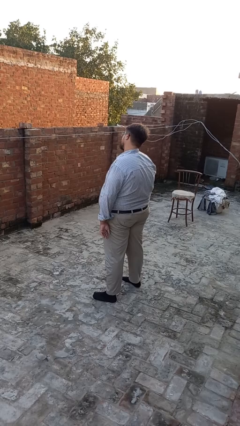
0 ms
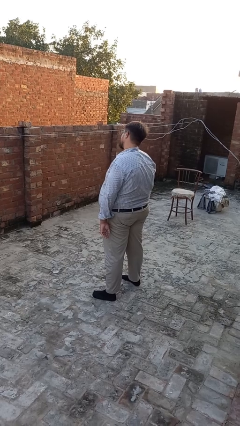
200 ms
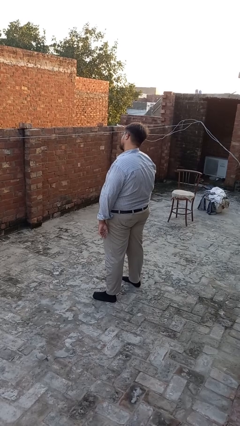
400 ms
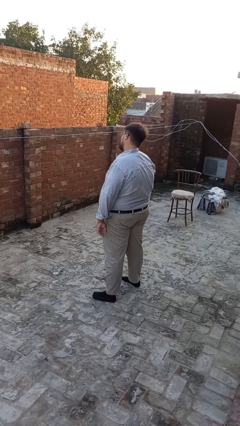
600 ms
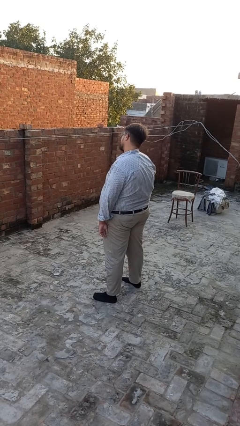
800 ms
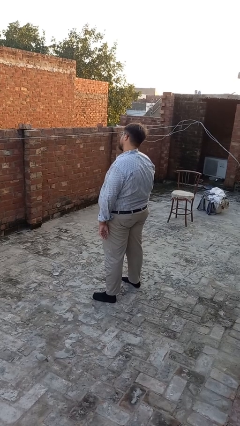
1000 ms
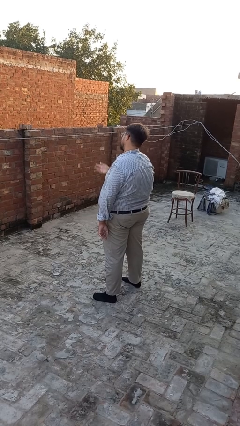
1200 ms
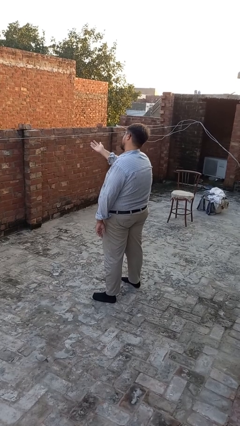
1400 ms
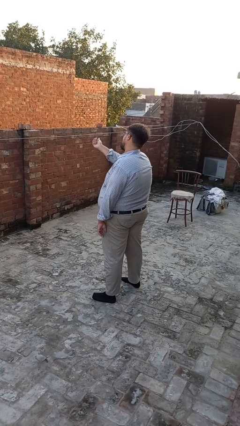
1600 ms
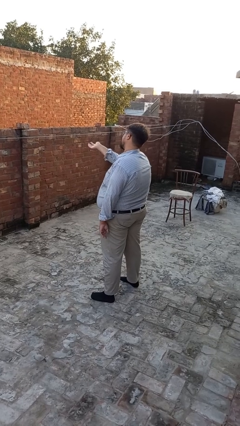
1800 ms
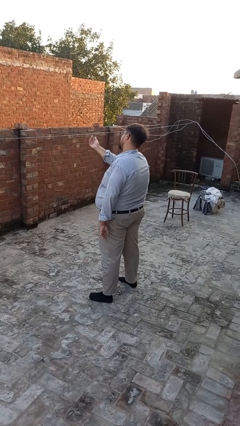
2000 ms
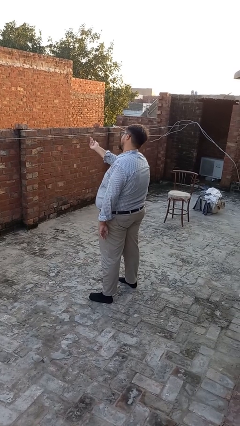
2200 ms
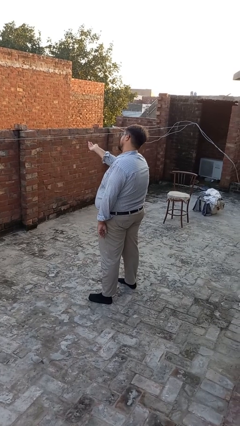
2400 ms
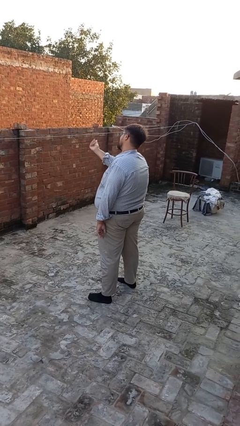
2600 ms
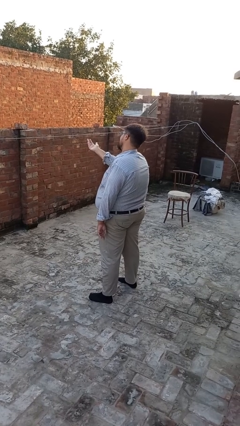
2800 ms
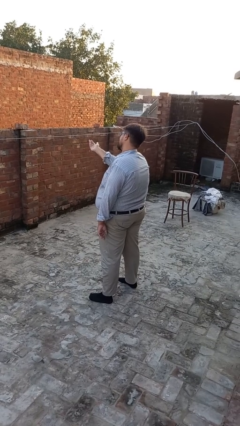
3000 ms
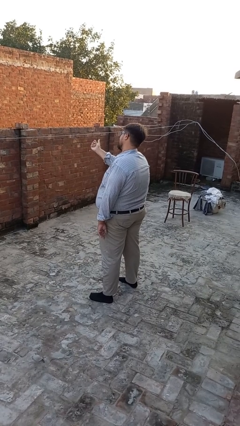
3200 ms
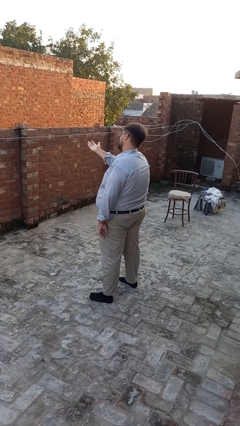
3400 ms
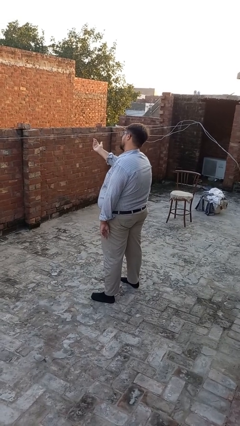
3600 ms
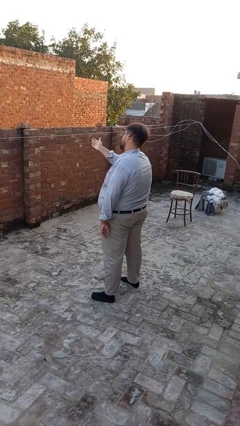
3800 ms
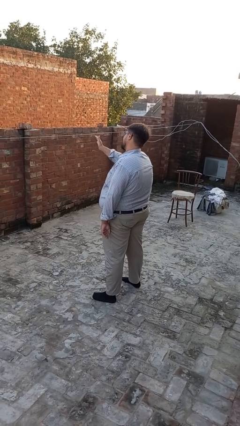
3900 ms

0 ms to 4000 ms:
person gestures come here

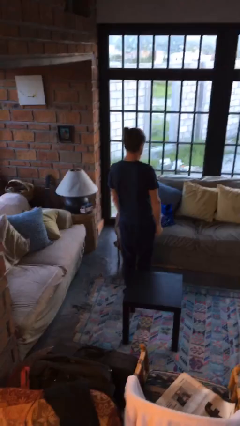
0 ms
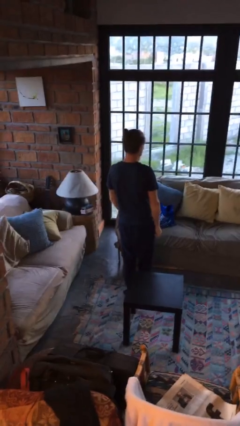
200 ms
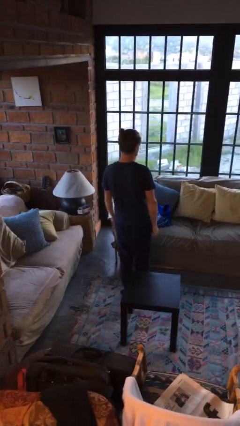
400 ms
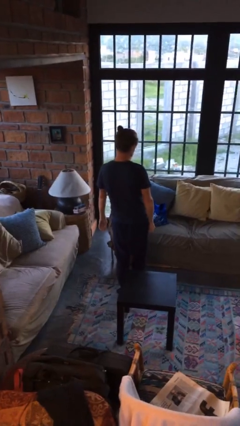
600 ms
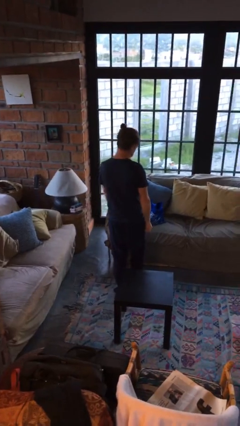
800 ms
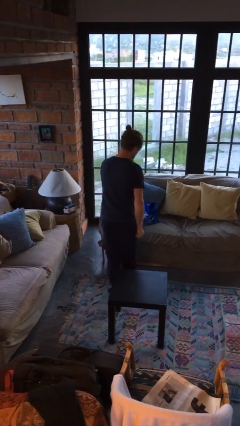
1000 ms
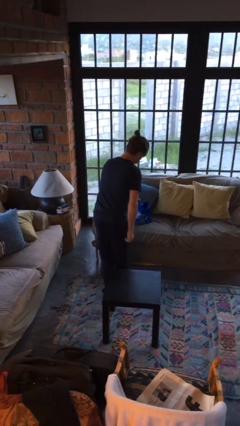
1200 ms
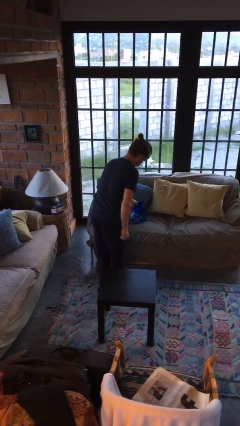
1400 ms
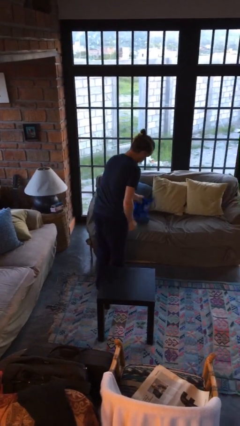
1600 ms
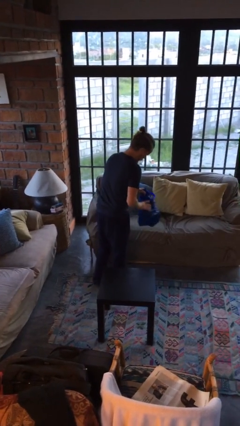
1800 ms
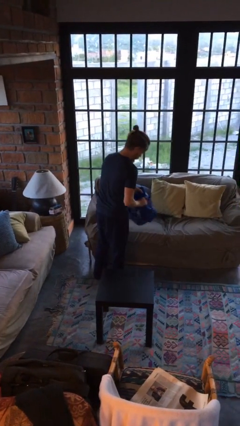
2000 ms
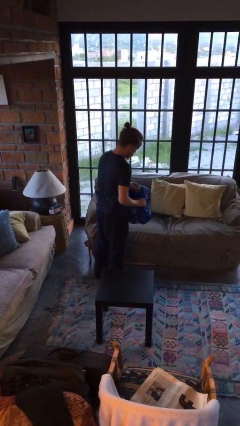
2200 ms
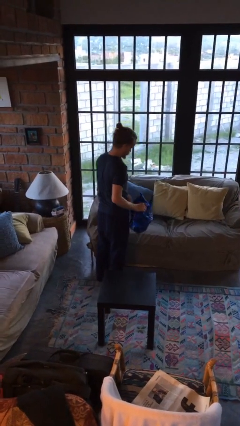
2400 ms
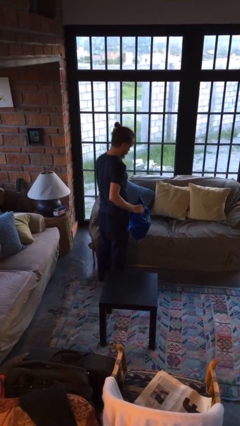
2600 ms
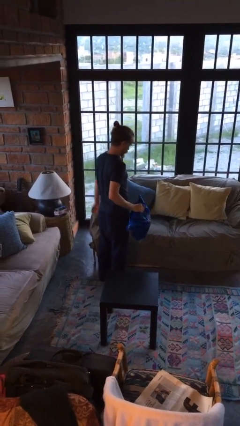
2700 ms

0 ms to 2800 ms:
person picks up object from couch

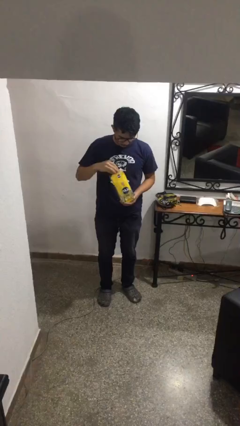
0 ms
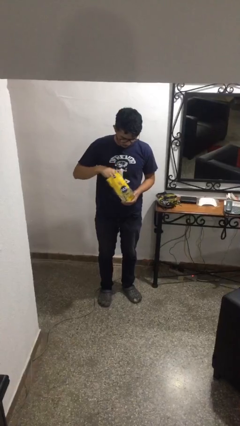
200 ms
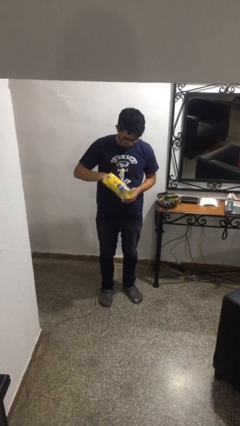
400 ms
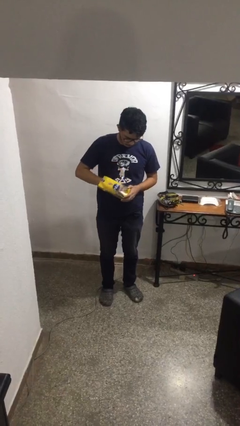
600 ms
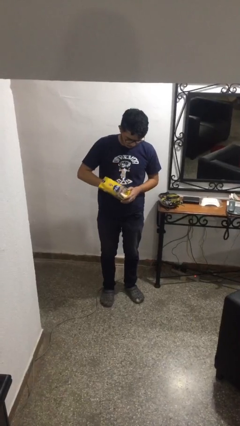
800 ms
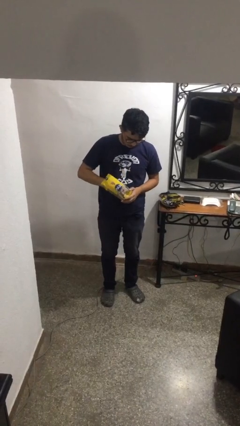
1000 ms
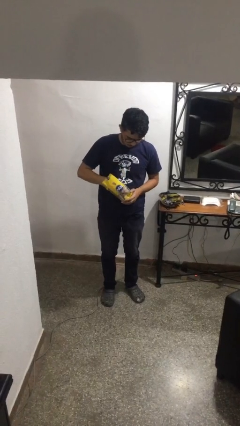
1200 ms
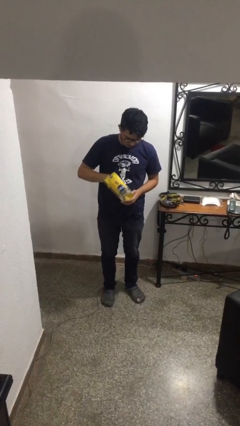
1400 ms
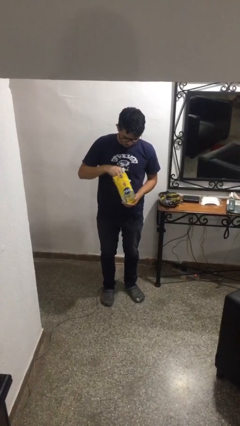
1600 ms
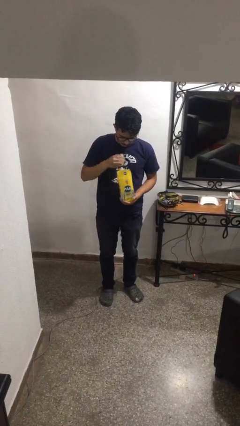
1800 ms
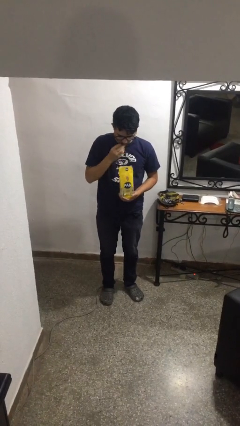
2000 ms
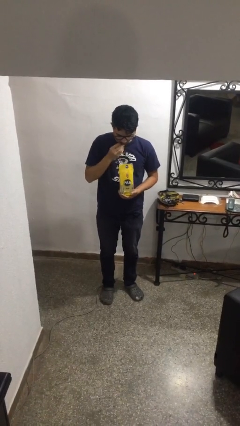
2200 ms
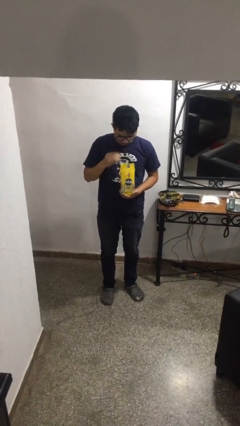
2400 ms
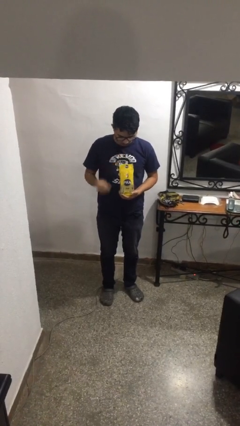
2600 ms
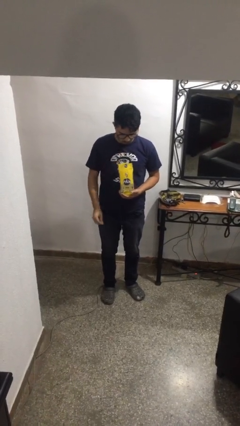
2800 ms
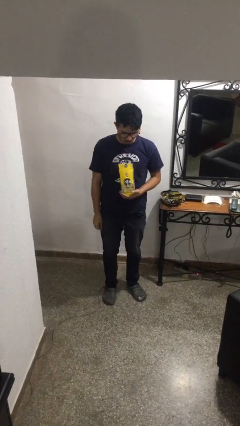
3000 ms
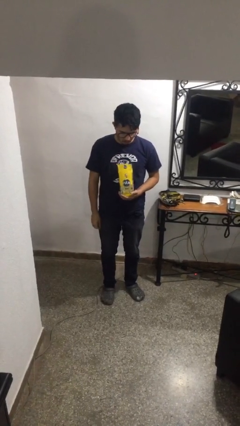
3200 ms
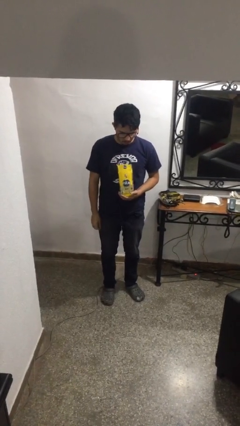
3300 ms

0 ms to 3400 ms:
person eats snack from bag

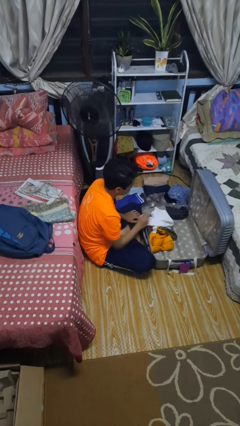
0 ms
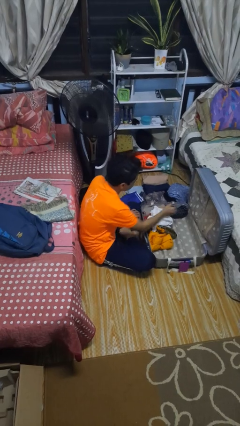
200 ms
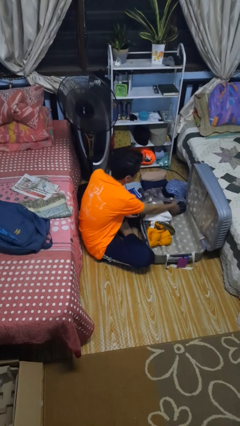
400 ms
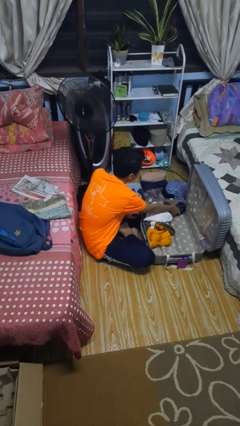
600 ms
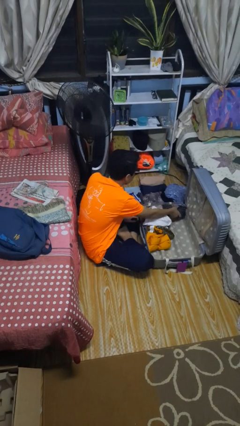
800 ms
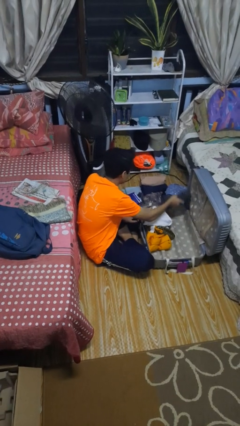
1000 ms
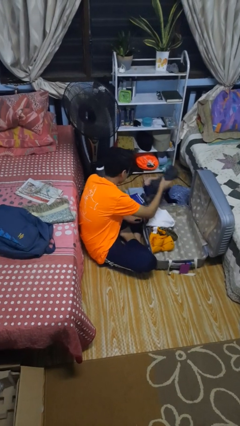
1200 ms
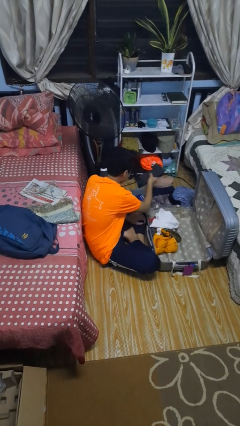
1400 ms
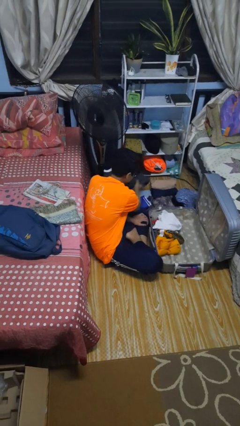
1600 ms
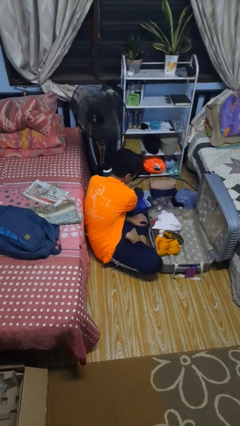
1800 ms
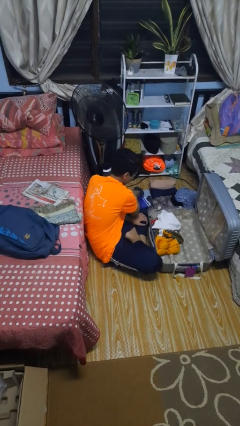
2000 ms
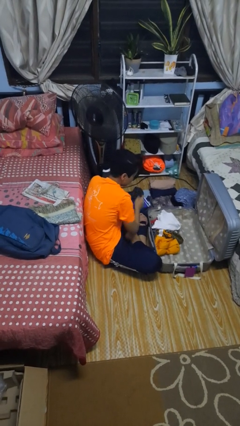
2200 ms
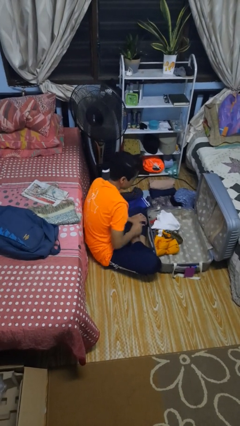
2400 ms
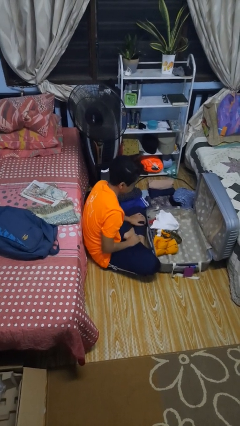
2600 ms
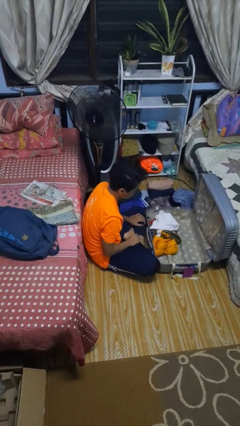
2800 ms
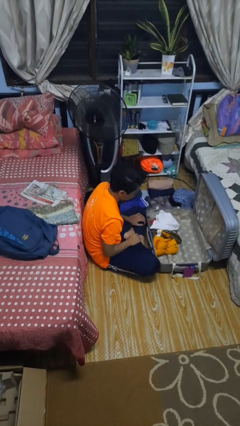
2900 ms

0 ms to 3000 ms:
person unloads clothes from suitcase

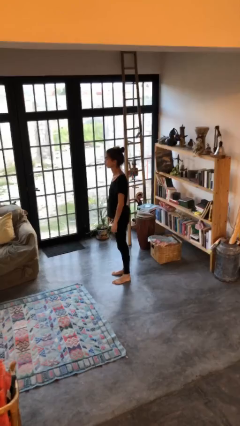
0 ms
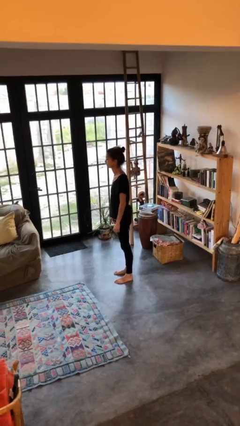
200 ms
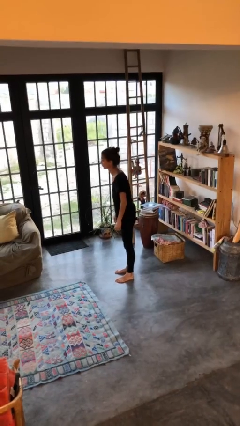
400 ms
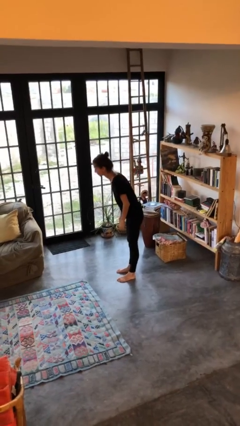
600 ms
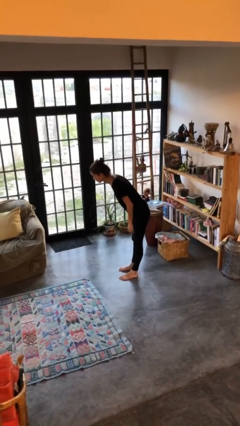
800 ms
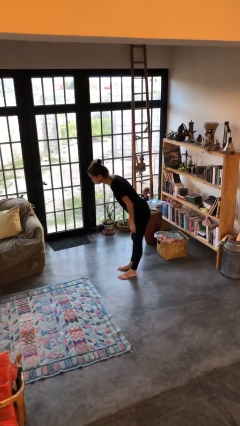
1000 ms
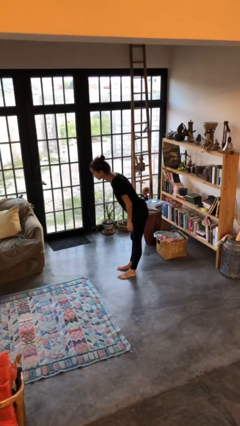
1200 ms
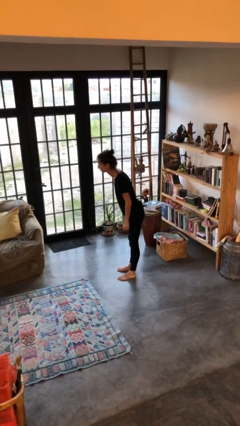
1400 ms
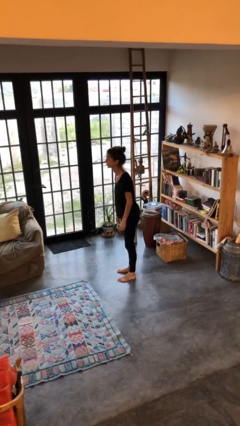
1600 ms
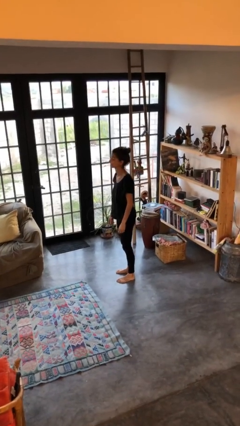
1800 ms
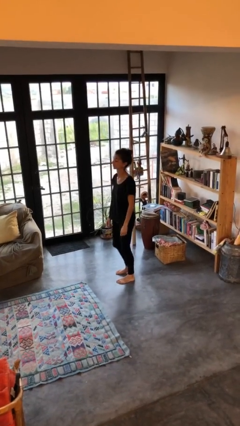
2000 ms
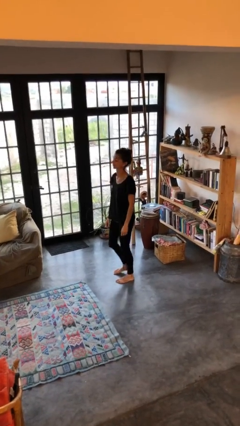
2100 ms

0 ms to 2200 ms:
person bows

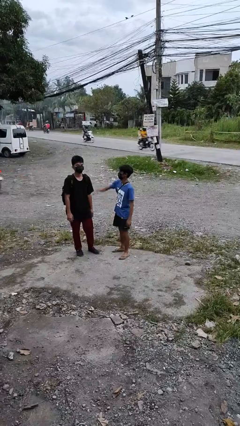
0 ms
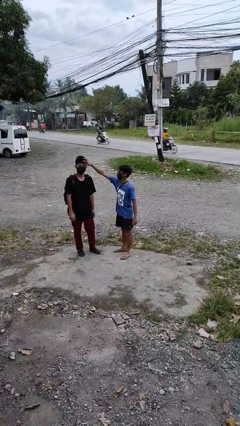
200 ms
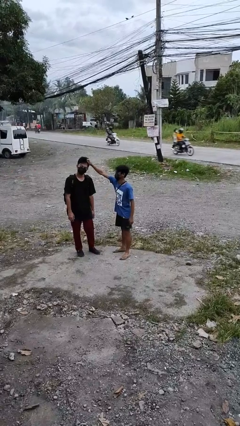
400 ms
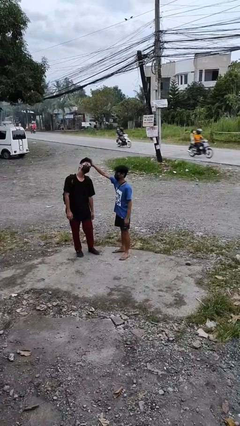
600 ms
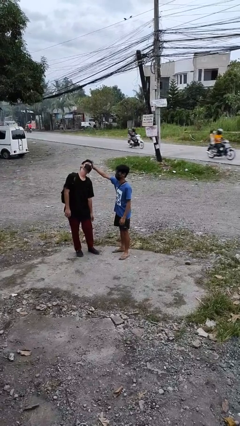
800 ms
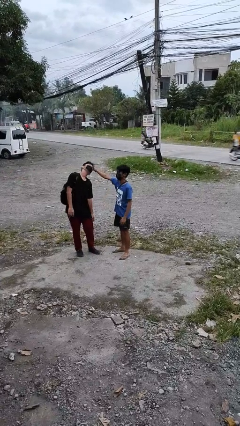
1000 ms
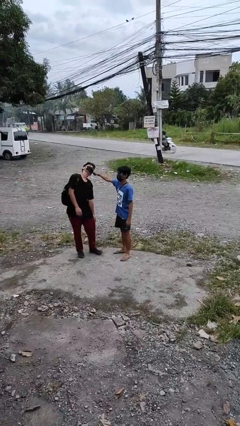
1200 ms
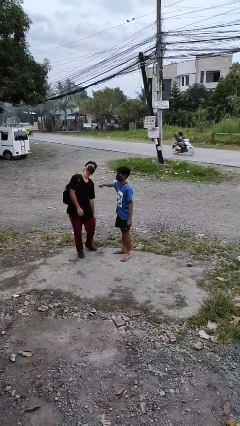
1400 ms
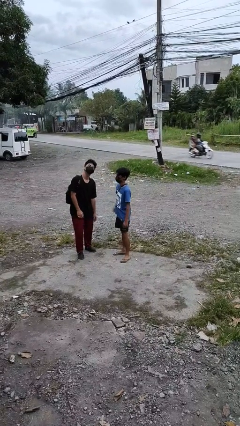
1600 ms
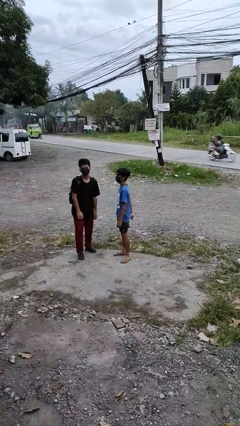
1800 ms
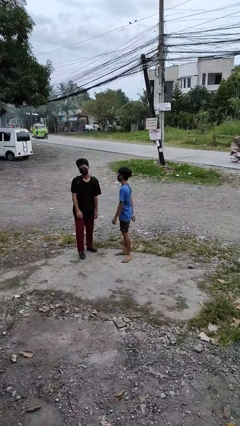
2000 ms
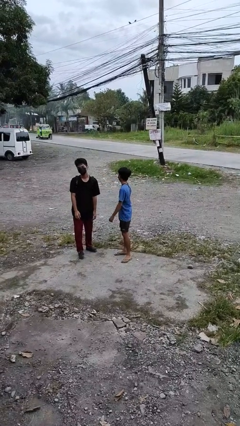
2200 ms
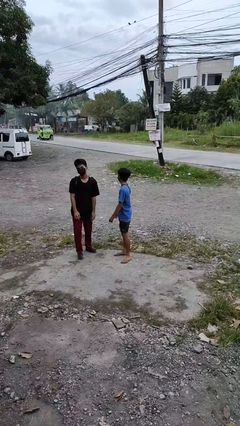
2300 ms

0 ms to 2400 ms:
person grabs person by hair
